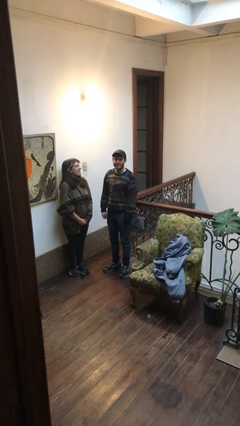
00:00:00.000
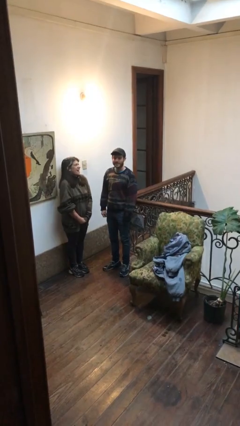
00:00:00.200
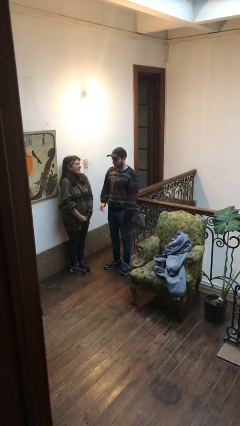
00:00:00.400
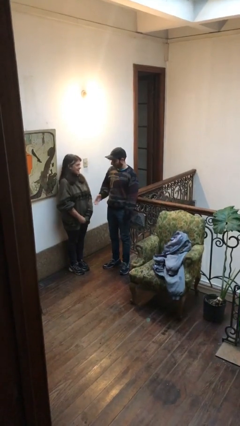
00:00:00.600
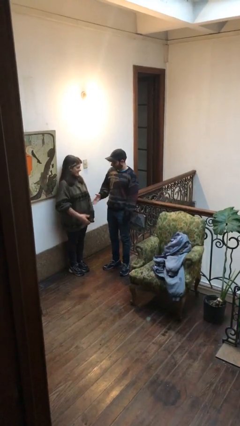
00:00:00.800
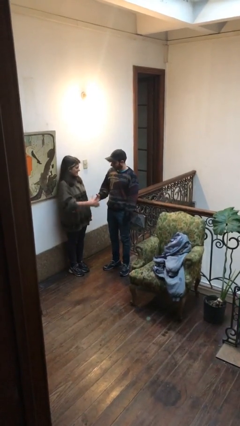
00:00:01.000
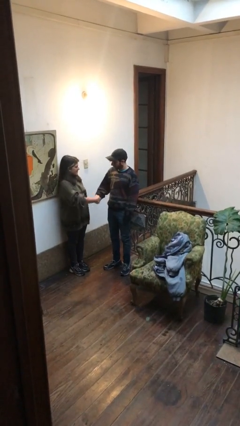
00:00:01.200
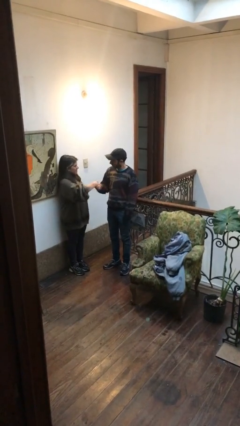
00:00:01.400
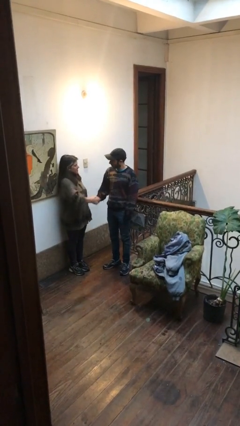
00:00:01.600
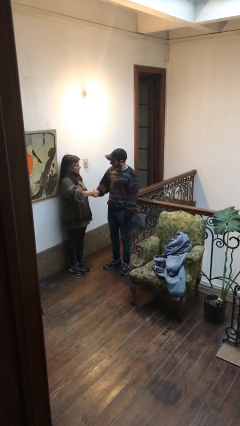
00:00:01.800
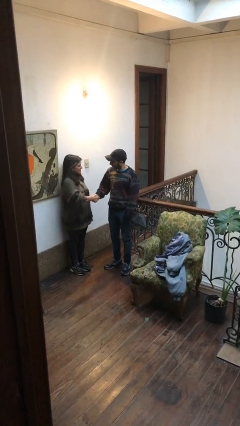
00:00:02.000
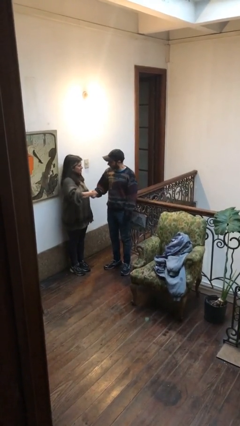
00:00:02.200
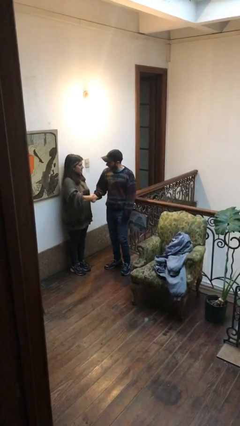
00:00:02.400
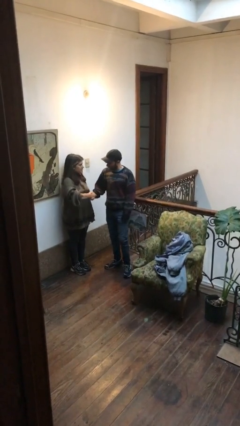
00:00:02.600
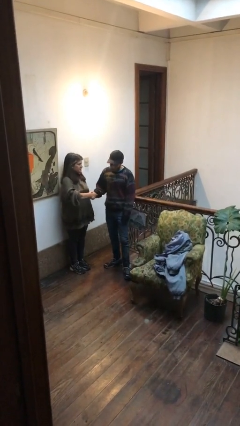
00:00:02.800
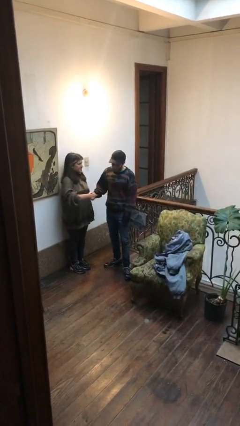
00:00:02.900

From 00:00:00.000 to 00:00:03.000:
person shakes hand

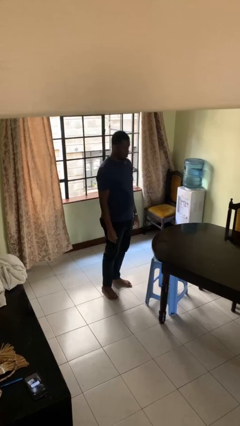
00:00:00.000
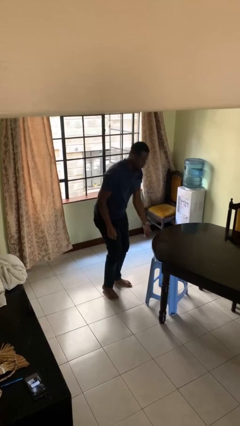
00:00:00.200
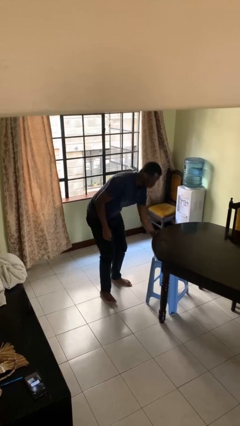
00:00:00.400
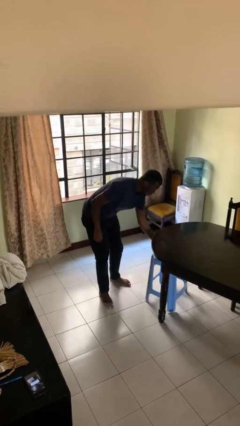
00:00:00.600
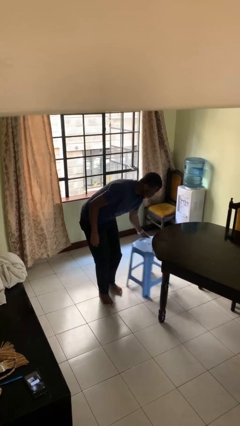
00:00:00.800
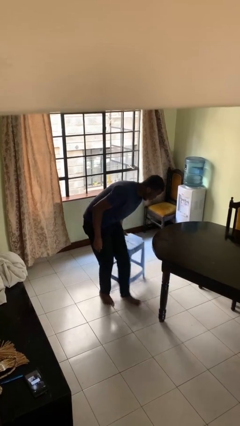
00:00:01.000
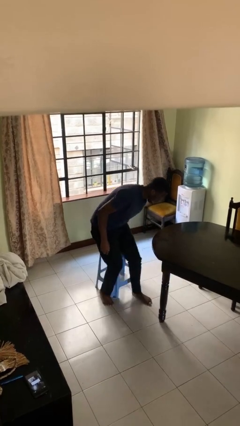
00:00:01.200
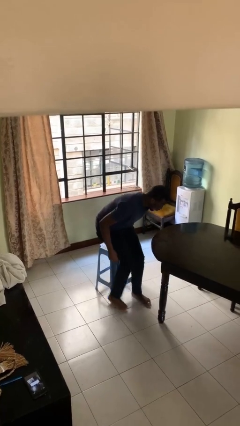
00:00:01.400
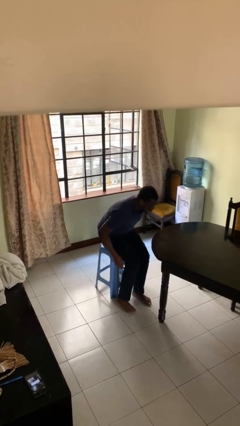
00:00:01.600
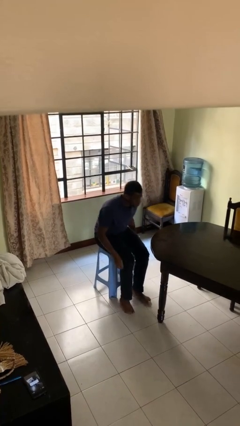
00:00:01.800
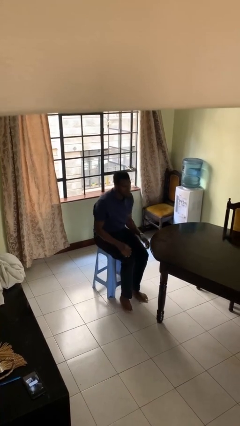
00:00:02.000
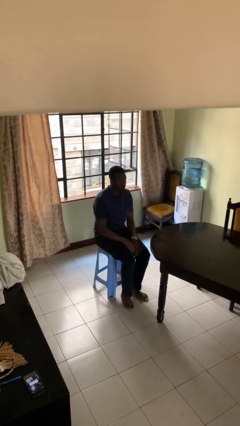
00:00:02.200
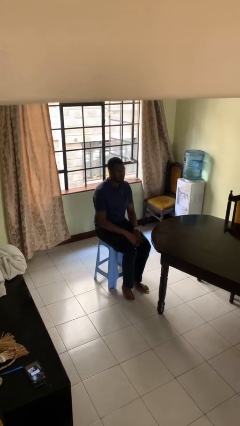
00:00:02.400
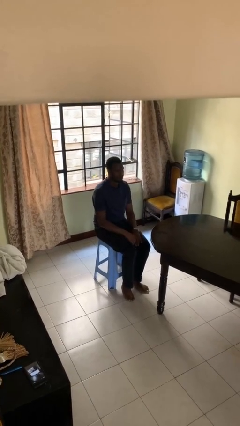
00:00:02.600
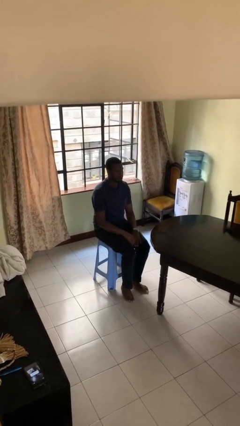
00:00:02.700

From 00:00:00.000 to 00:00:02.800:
person sits down

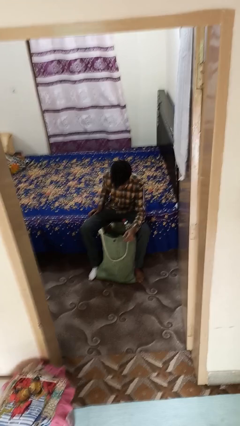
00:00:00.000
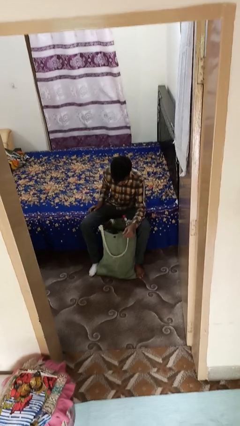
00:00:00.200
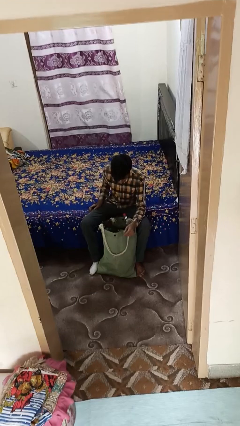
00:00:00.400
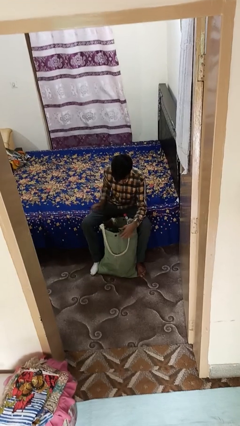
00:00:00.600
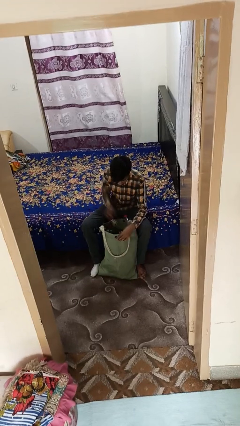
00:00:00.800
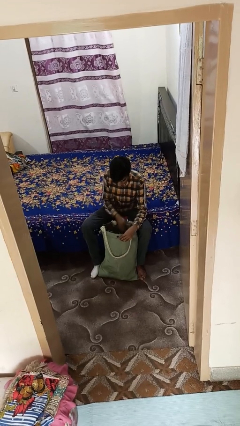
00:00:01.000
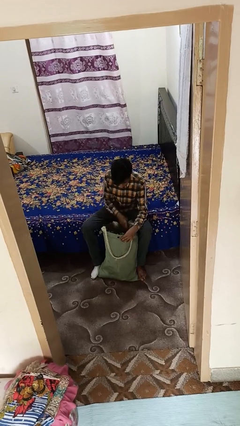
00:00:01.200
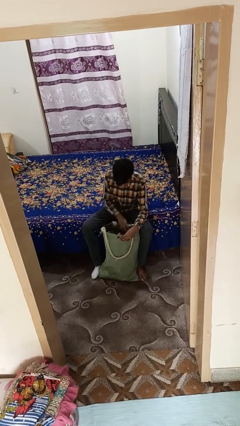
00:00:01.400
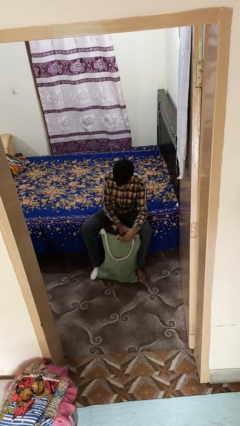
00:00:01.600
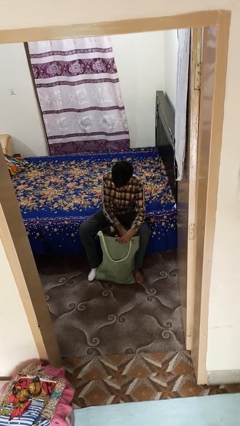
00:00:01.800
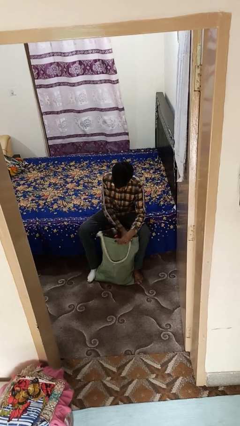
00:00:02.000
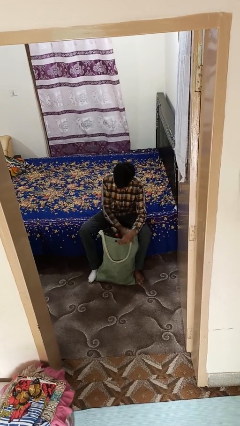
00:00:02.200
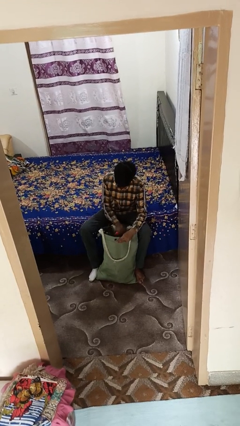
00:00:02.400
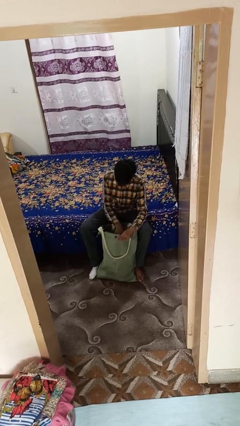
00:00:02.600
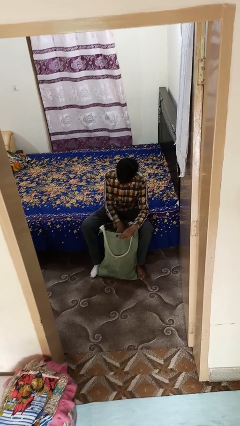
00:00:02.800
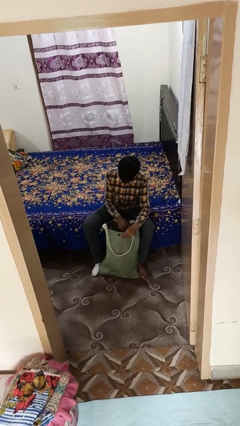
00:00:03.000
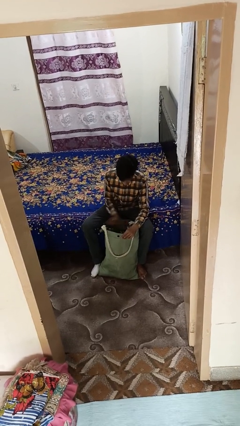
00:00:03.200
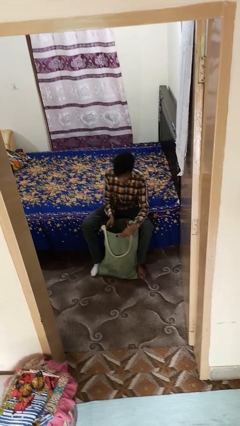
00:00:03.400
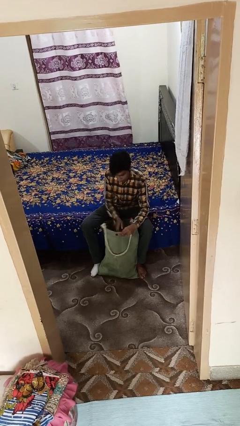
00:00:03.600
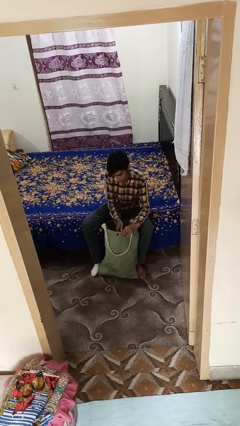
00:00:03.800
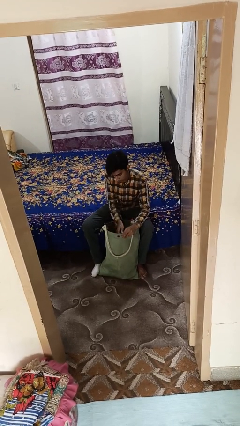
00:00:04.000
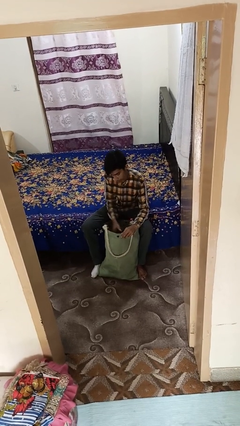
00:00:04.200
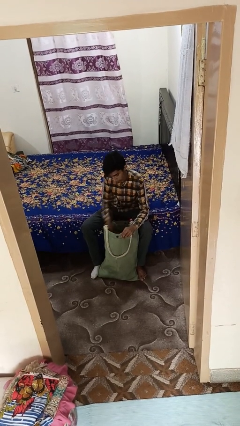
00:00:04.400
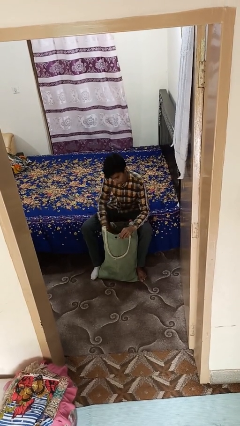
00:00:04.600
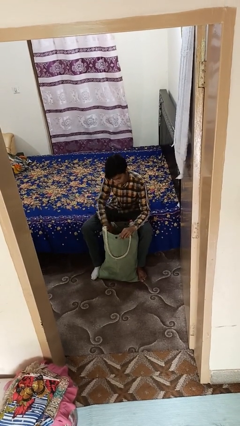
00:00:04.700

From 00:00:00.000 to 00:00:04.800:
person searches in bag

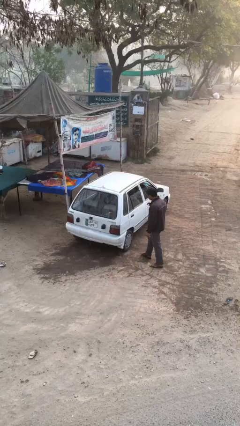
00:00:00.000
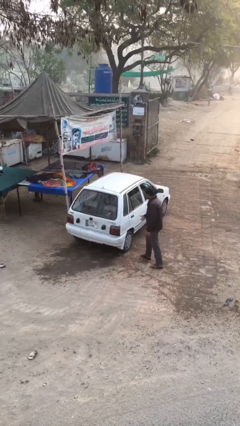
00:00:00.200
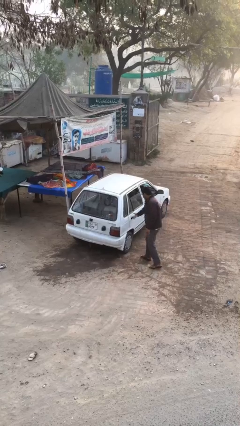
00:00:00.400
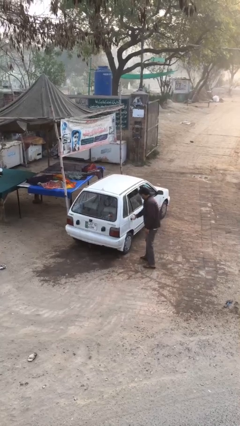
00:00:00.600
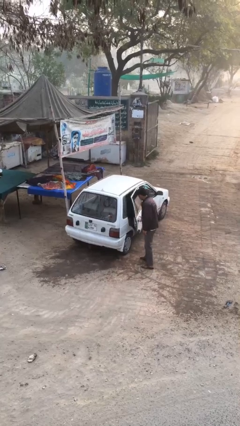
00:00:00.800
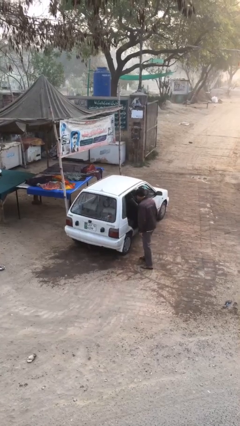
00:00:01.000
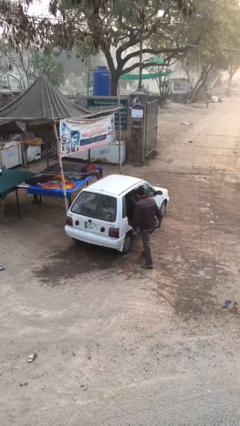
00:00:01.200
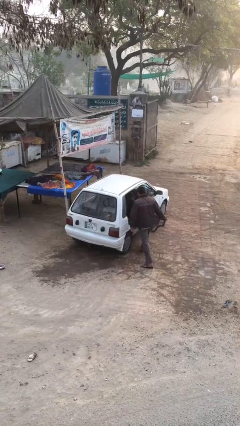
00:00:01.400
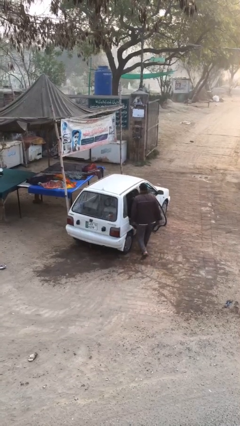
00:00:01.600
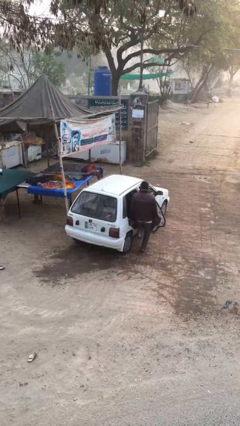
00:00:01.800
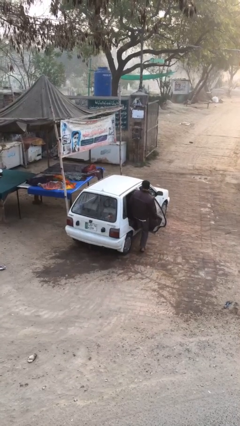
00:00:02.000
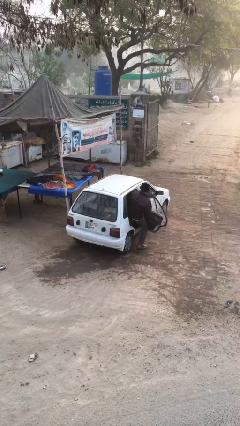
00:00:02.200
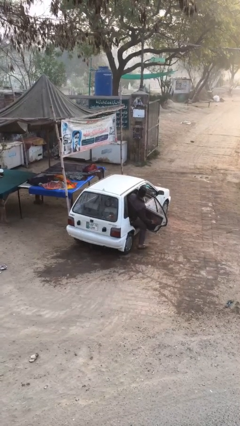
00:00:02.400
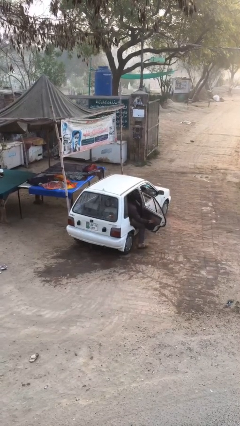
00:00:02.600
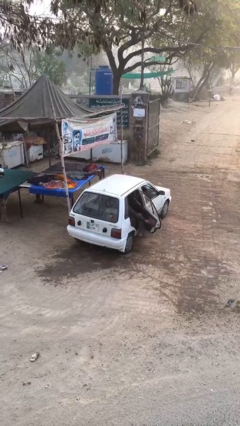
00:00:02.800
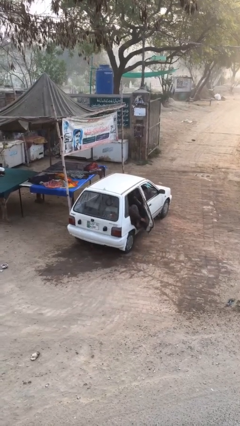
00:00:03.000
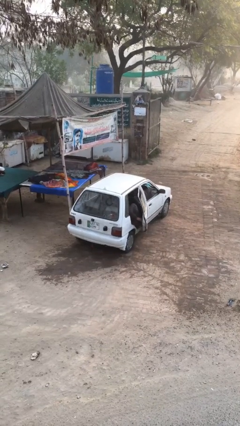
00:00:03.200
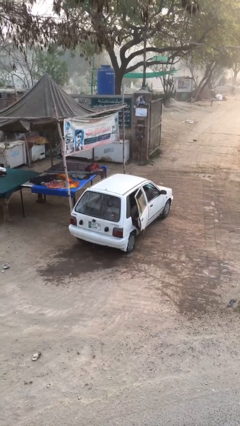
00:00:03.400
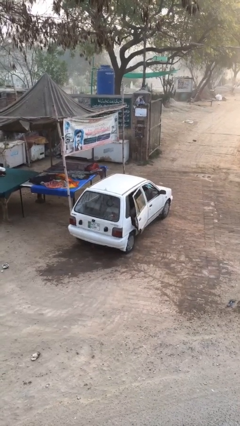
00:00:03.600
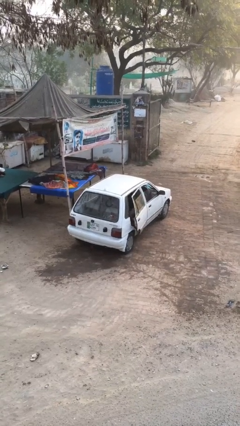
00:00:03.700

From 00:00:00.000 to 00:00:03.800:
car picks up person

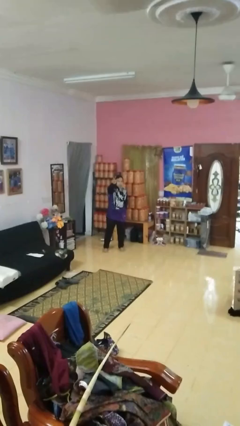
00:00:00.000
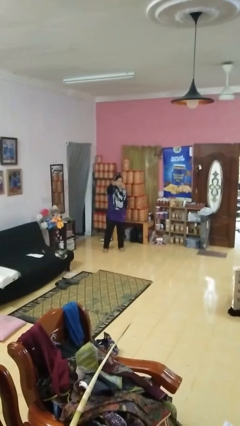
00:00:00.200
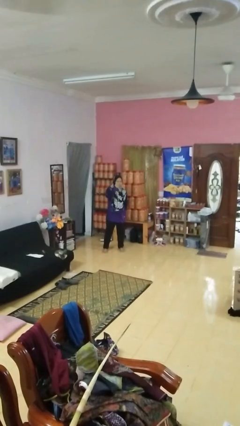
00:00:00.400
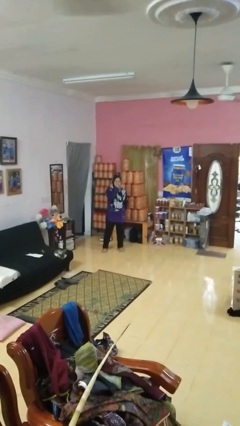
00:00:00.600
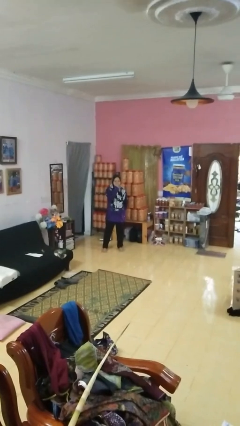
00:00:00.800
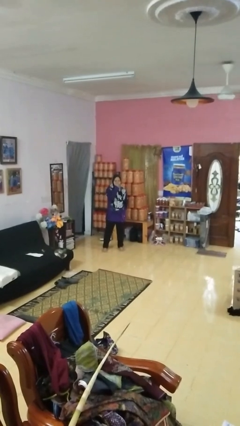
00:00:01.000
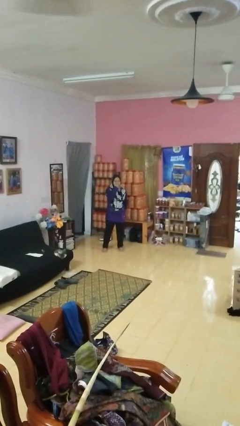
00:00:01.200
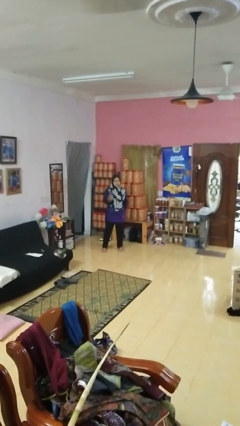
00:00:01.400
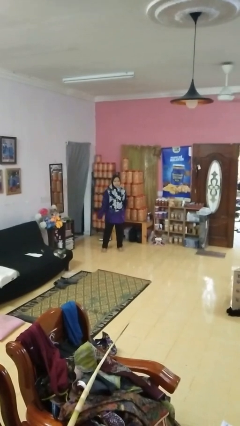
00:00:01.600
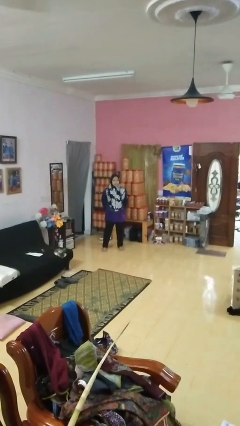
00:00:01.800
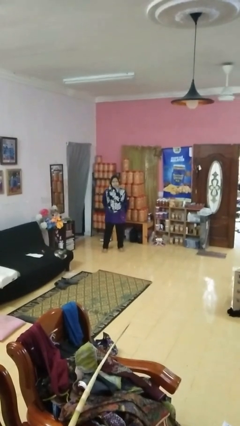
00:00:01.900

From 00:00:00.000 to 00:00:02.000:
person gestures watch closely

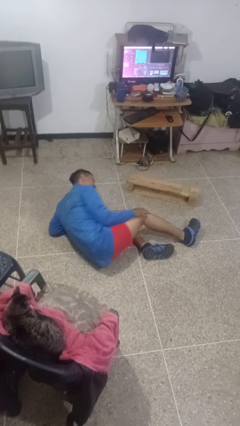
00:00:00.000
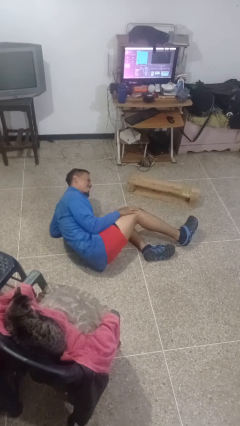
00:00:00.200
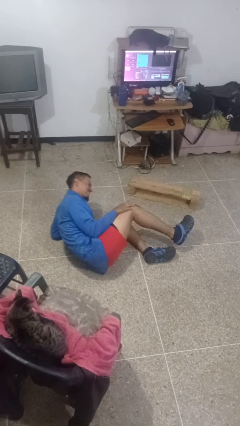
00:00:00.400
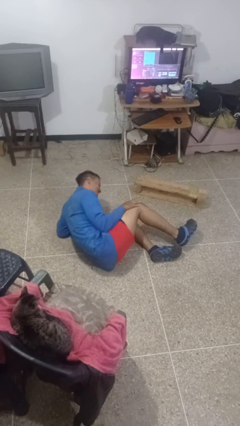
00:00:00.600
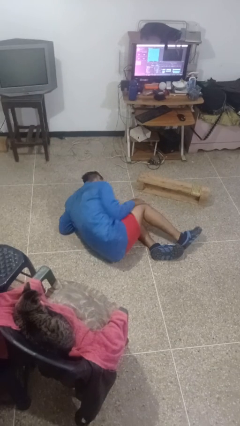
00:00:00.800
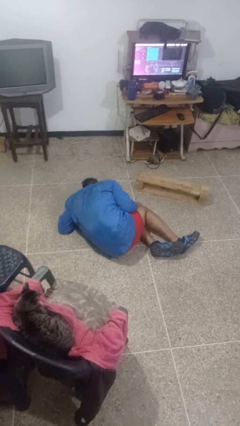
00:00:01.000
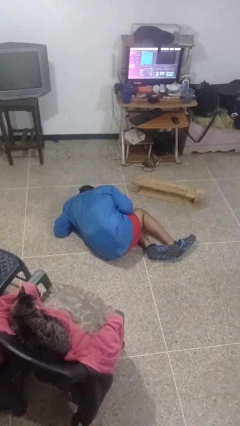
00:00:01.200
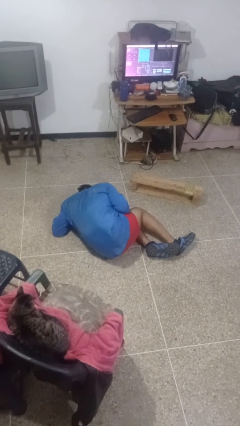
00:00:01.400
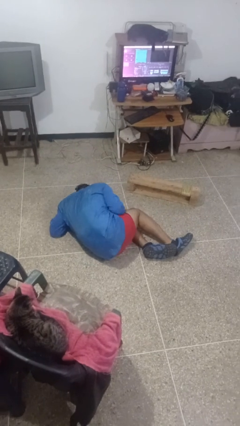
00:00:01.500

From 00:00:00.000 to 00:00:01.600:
person lies down on floor
